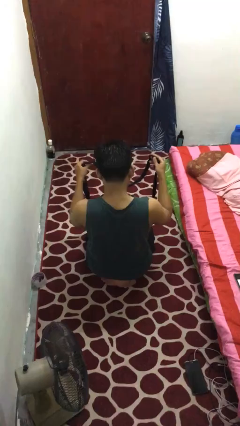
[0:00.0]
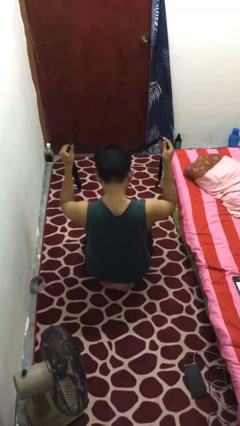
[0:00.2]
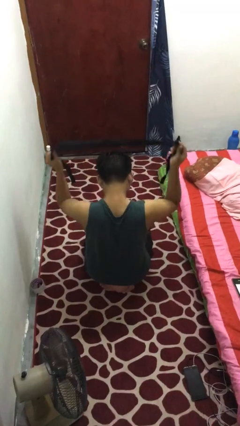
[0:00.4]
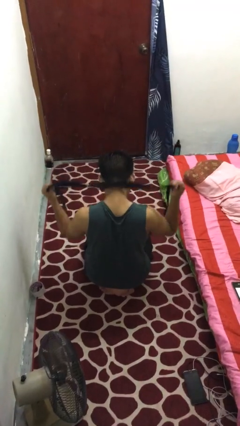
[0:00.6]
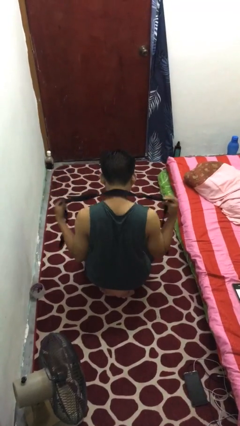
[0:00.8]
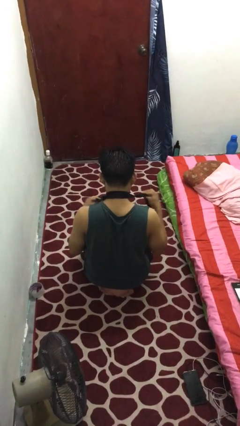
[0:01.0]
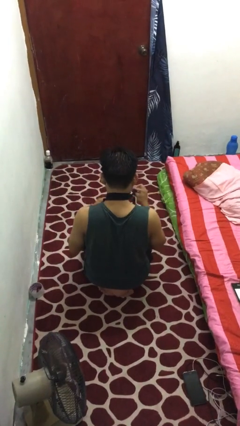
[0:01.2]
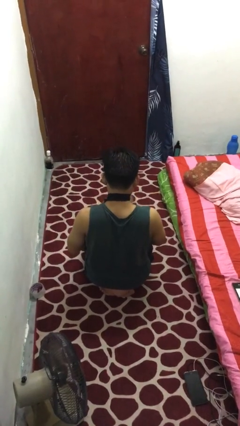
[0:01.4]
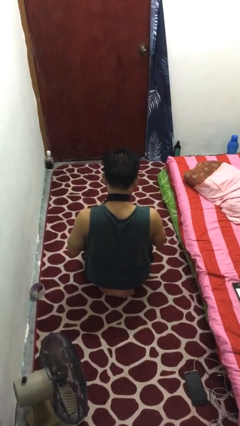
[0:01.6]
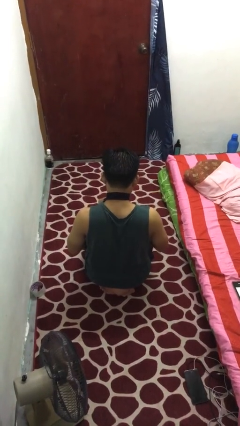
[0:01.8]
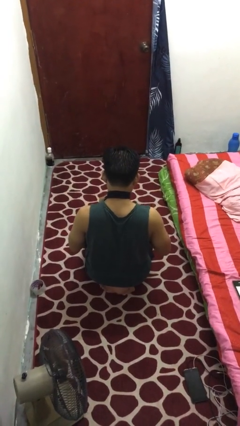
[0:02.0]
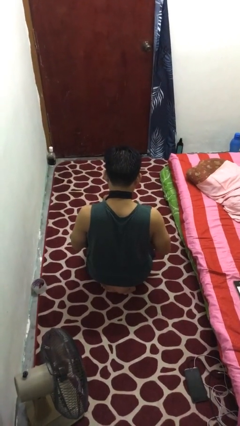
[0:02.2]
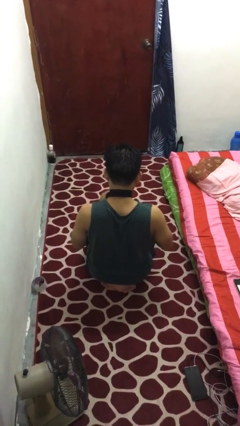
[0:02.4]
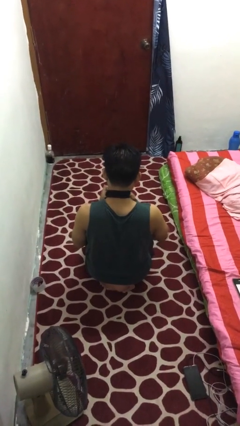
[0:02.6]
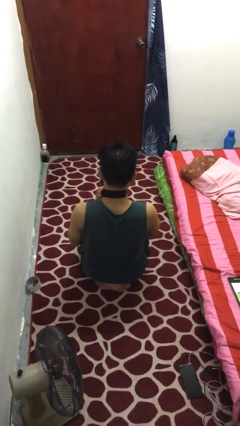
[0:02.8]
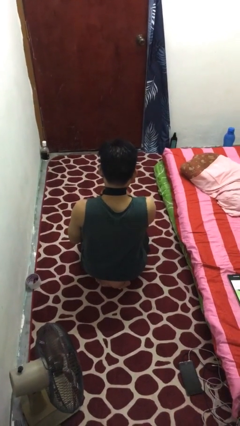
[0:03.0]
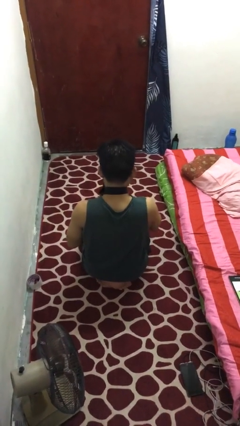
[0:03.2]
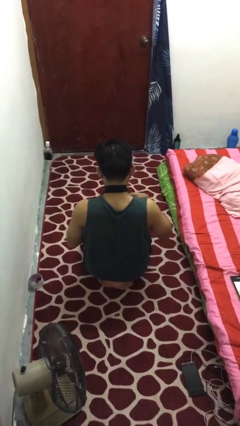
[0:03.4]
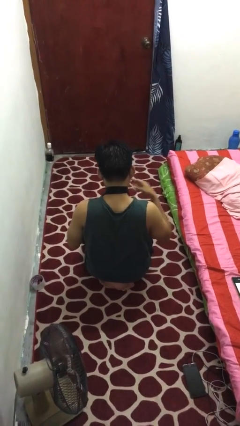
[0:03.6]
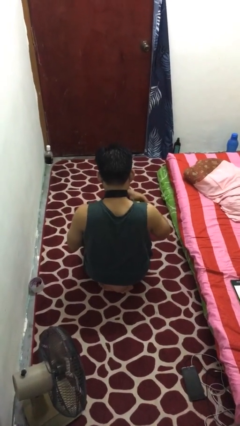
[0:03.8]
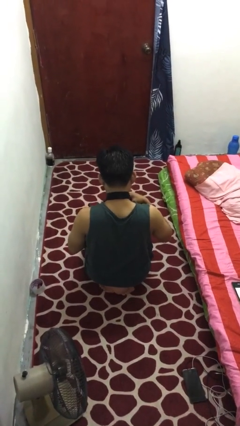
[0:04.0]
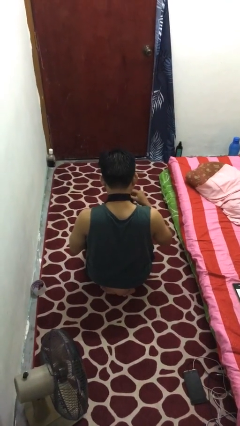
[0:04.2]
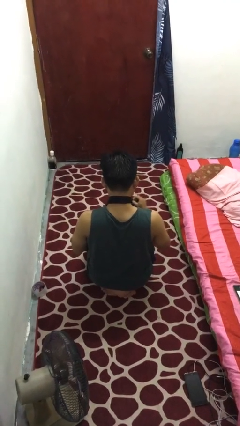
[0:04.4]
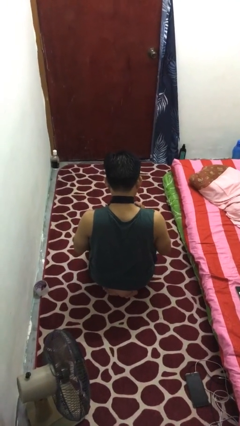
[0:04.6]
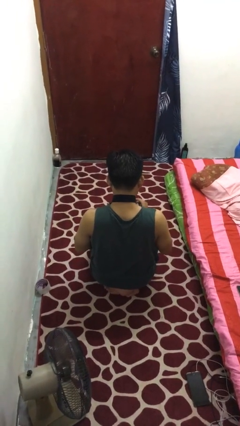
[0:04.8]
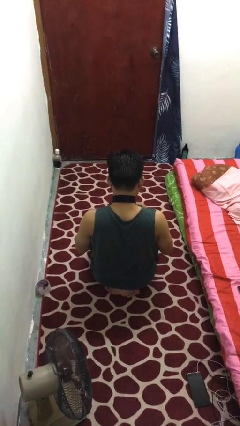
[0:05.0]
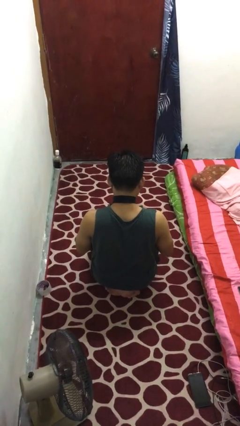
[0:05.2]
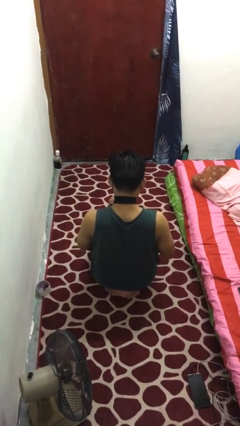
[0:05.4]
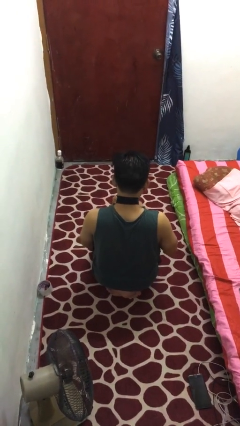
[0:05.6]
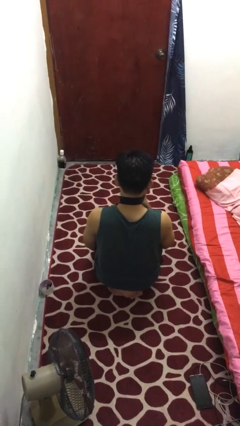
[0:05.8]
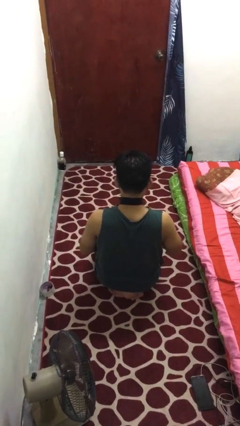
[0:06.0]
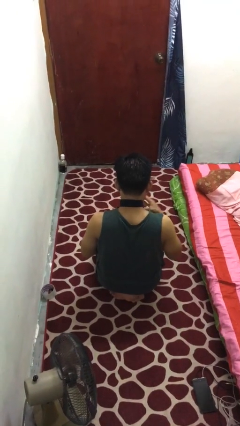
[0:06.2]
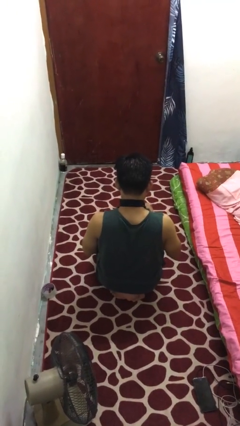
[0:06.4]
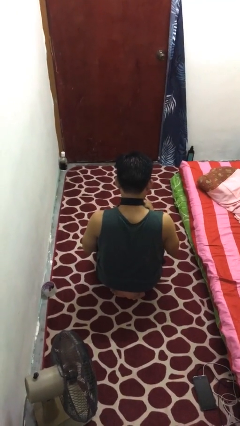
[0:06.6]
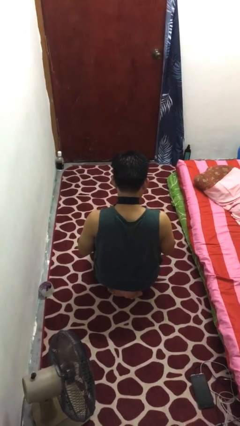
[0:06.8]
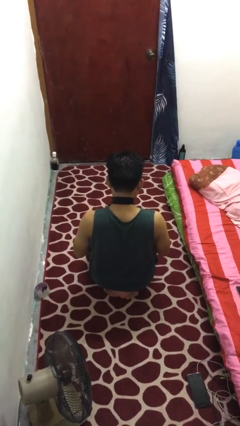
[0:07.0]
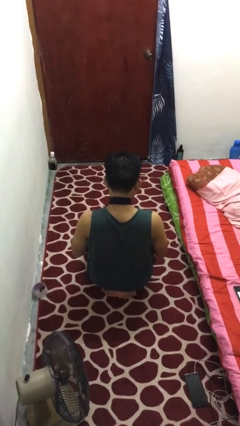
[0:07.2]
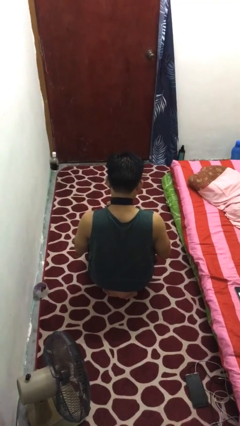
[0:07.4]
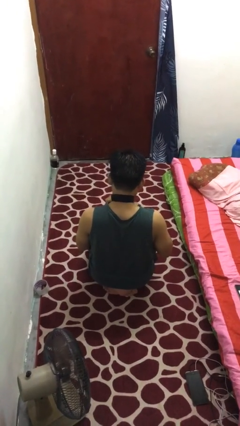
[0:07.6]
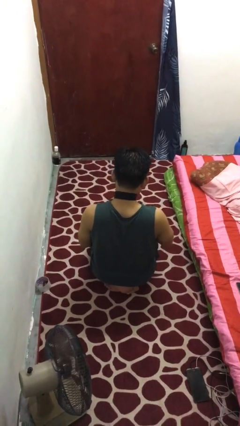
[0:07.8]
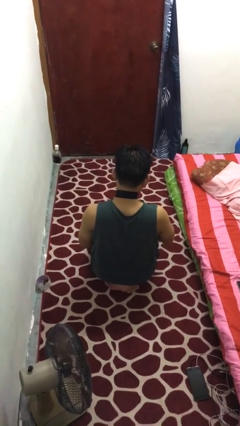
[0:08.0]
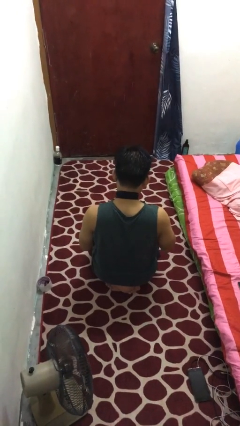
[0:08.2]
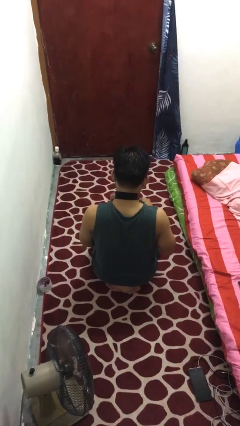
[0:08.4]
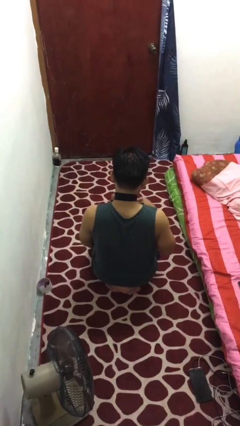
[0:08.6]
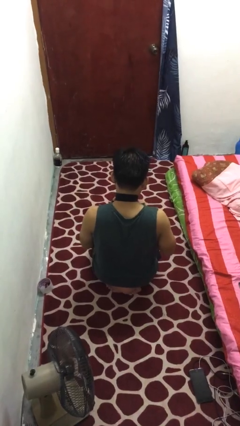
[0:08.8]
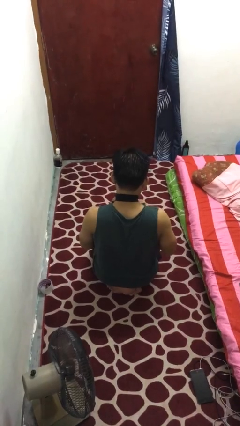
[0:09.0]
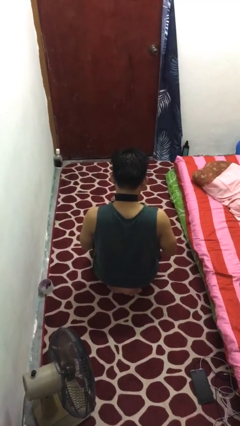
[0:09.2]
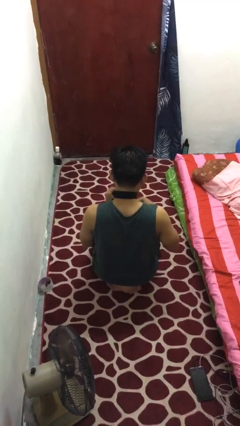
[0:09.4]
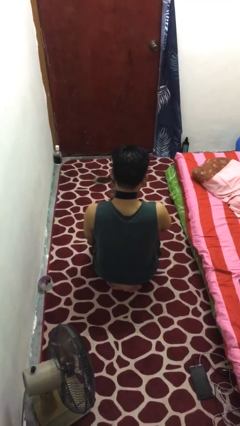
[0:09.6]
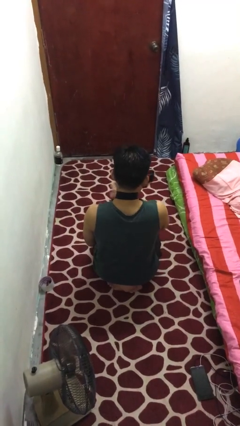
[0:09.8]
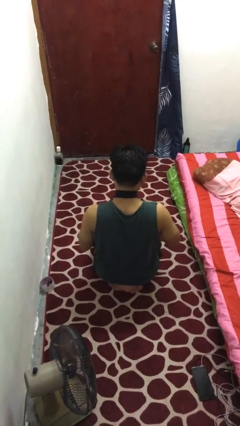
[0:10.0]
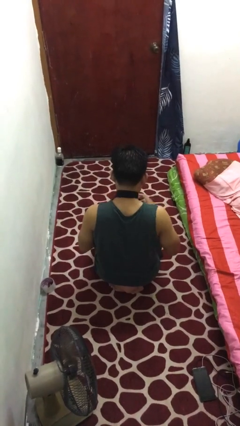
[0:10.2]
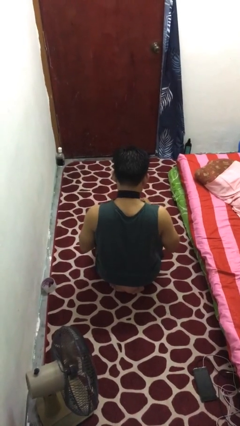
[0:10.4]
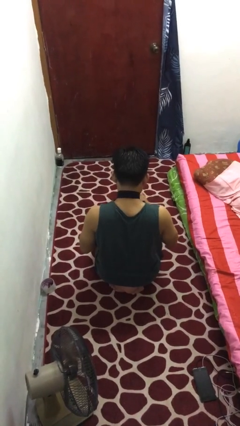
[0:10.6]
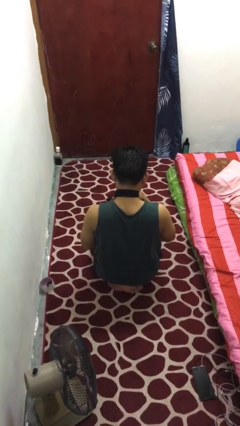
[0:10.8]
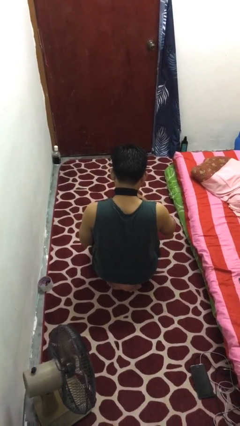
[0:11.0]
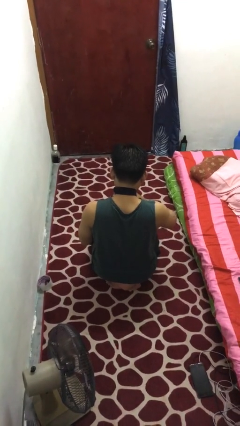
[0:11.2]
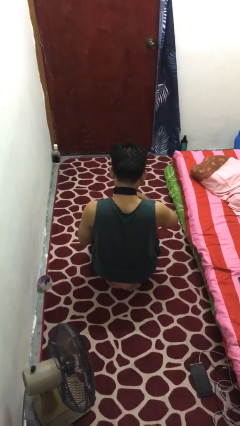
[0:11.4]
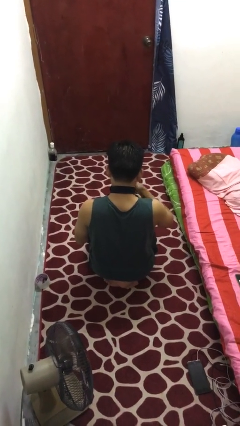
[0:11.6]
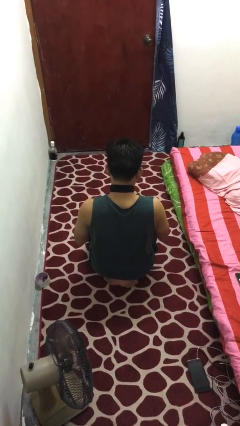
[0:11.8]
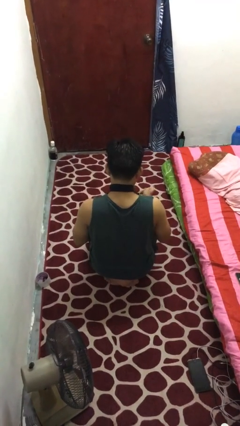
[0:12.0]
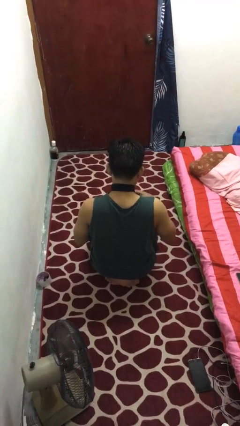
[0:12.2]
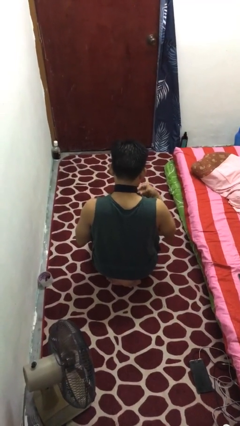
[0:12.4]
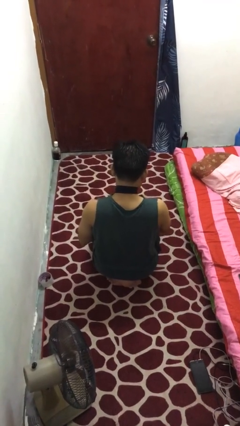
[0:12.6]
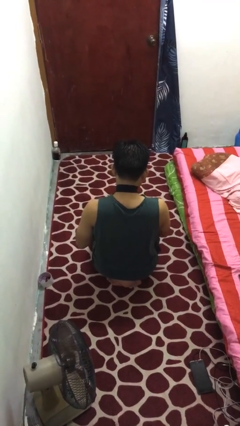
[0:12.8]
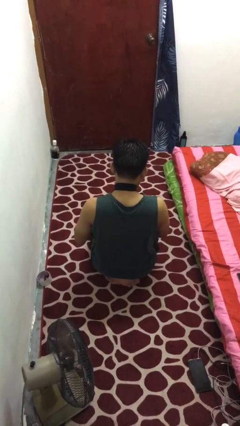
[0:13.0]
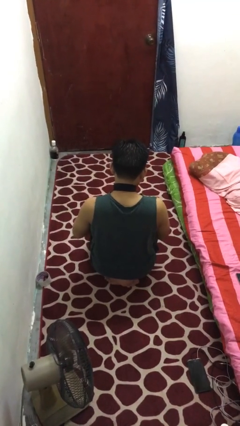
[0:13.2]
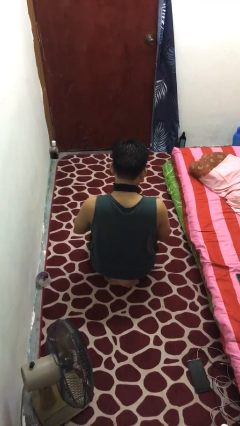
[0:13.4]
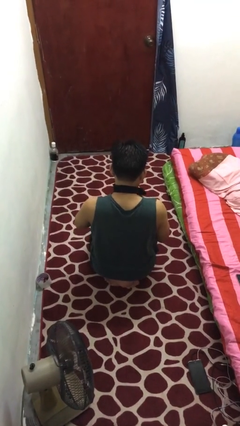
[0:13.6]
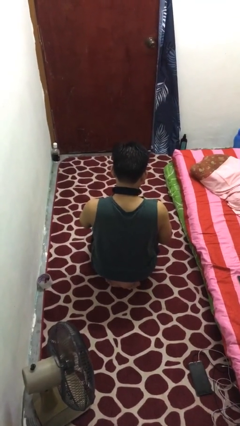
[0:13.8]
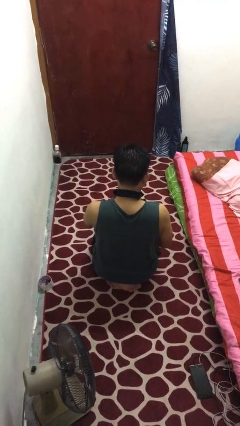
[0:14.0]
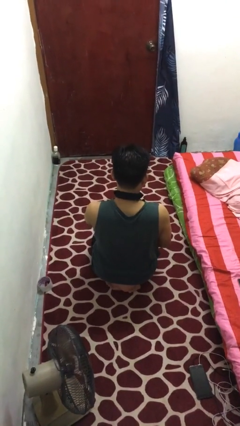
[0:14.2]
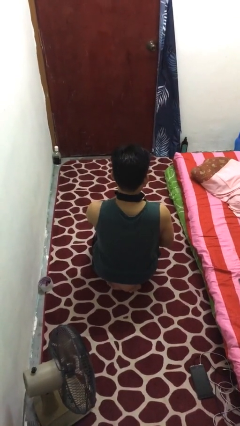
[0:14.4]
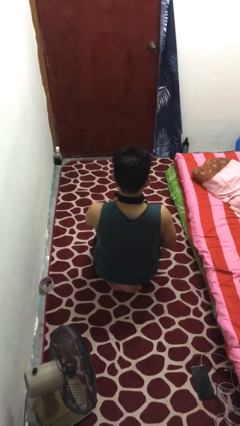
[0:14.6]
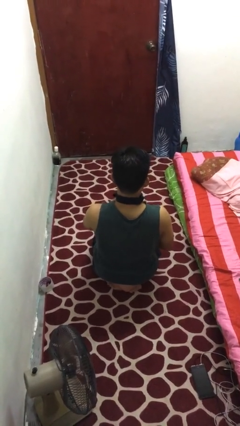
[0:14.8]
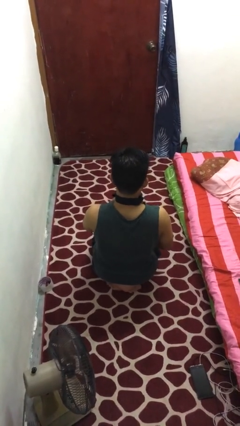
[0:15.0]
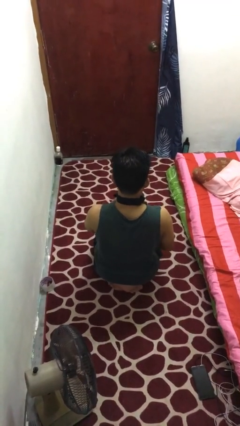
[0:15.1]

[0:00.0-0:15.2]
person puts on necktie

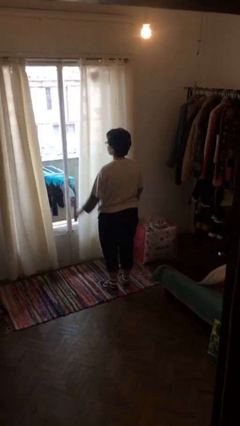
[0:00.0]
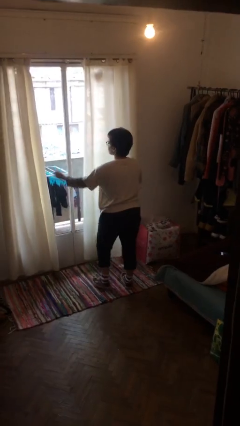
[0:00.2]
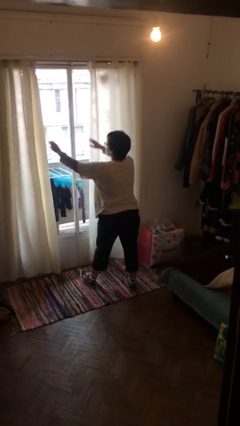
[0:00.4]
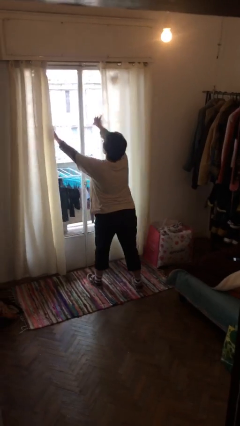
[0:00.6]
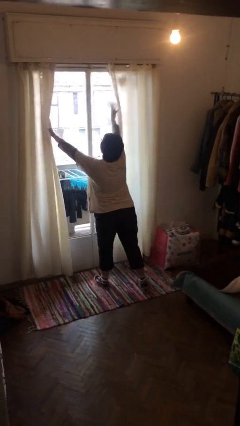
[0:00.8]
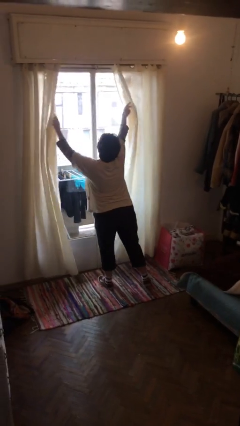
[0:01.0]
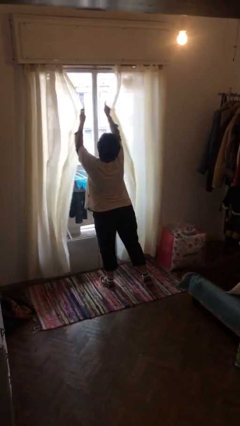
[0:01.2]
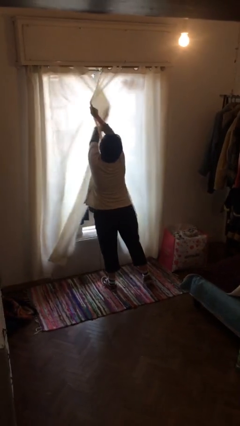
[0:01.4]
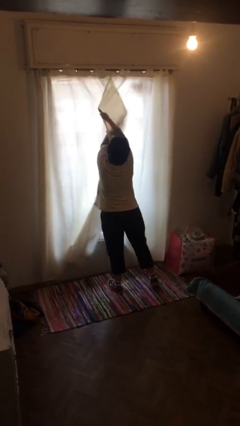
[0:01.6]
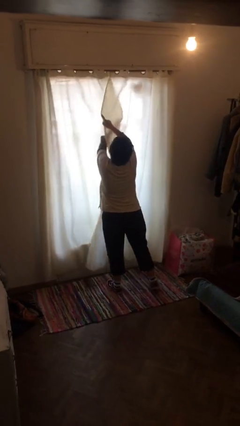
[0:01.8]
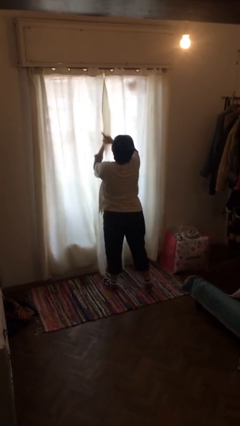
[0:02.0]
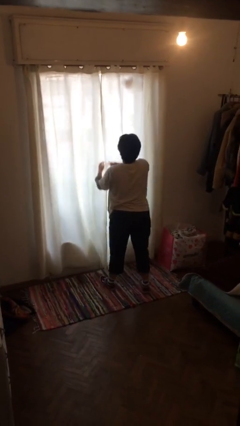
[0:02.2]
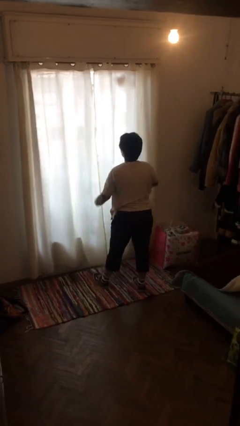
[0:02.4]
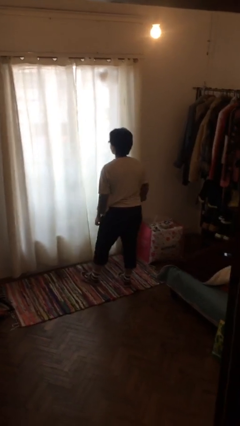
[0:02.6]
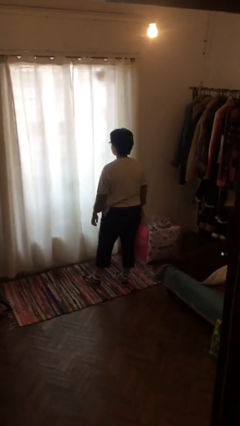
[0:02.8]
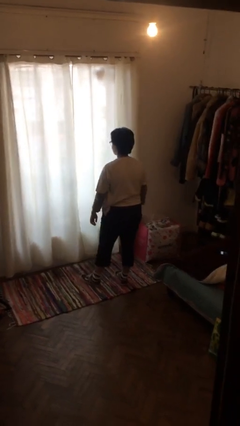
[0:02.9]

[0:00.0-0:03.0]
person closes curtains

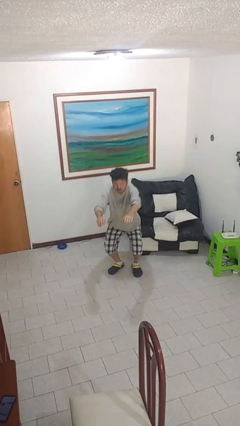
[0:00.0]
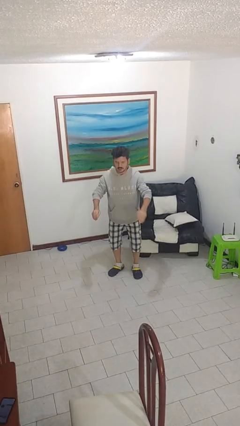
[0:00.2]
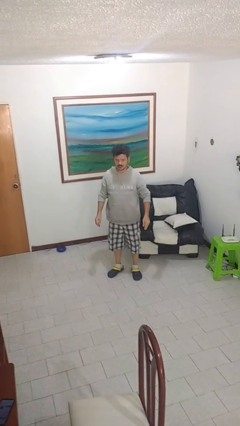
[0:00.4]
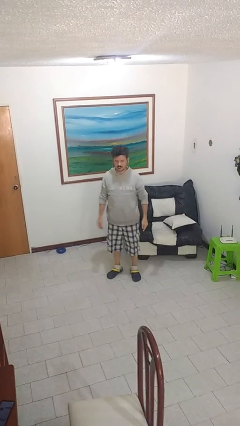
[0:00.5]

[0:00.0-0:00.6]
person stands up
